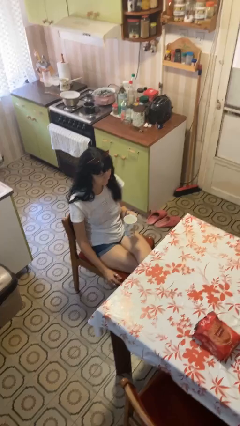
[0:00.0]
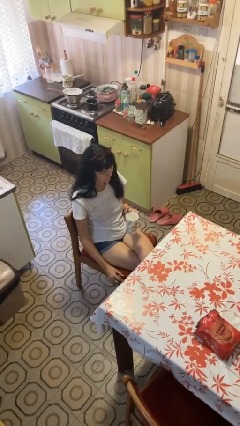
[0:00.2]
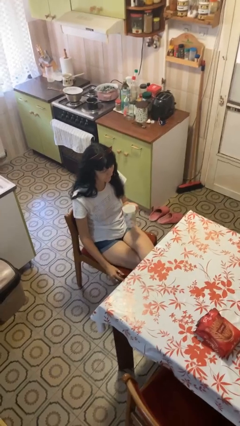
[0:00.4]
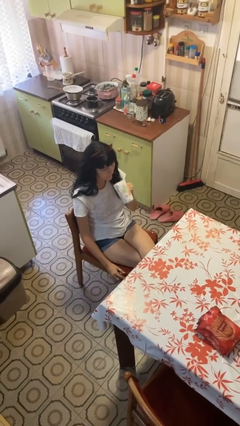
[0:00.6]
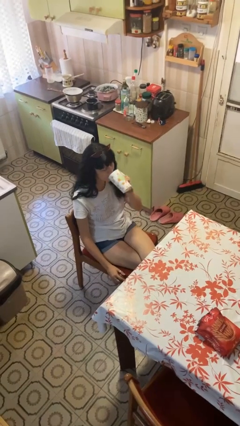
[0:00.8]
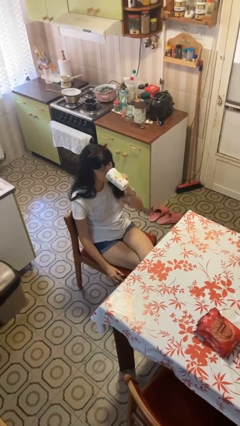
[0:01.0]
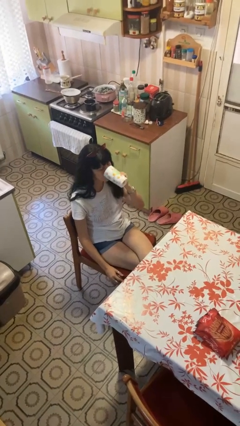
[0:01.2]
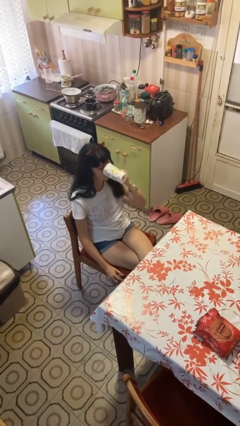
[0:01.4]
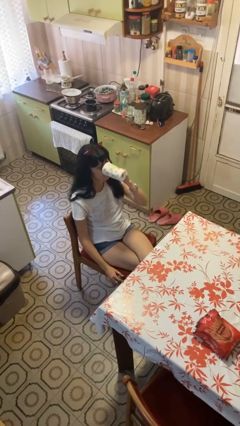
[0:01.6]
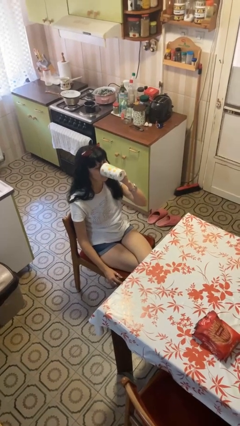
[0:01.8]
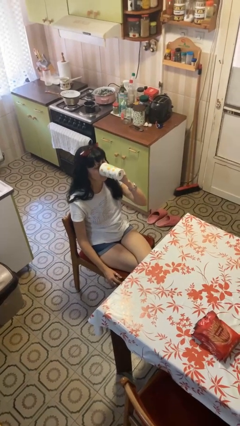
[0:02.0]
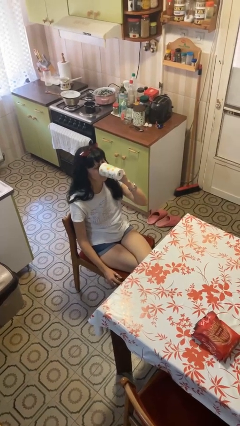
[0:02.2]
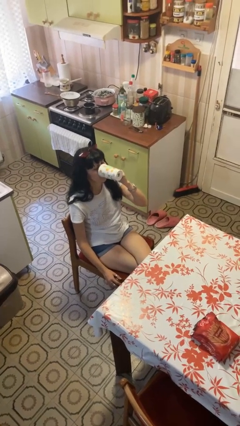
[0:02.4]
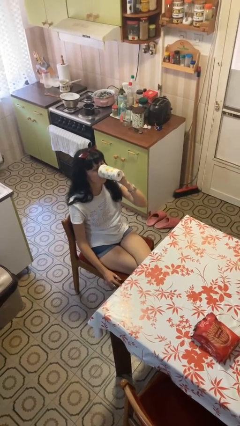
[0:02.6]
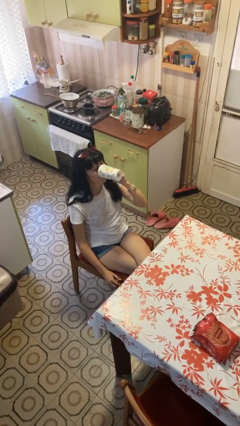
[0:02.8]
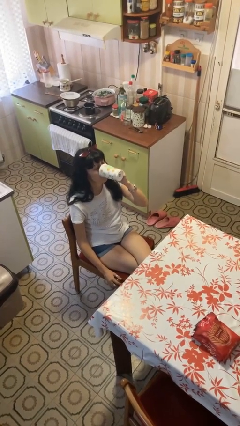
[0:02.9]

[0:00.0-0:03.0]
person drinks from mug

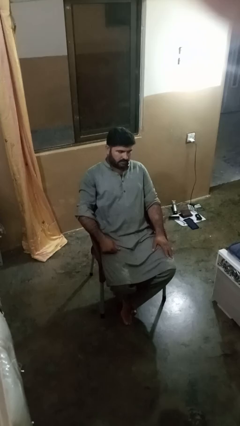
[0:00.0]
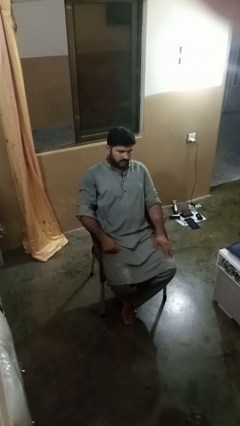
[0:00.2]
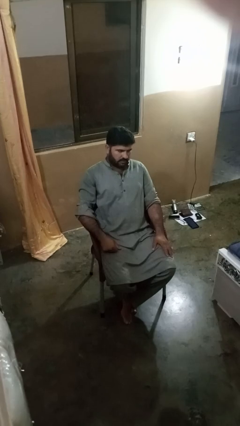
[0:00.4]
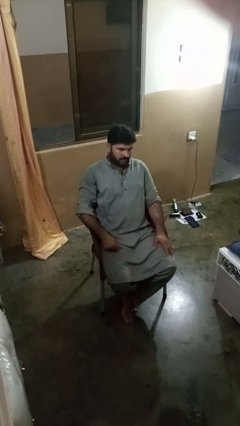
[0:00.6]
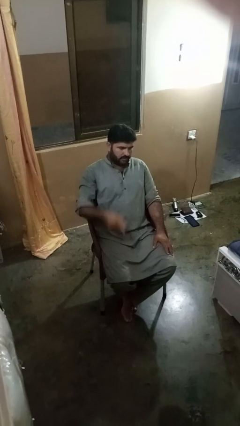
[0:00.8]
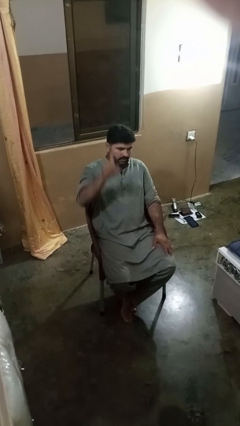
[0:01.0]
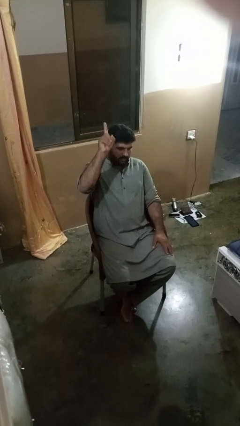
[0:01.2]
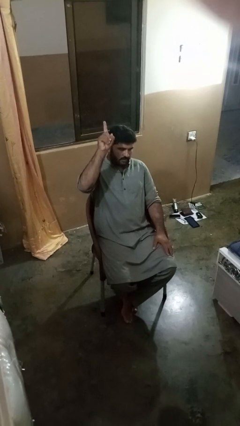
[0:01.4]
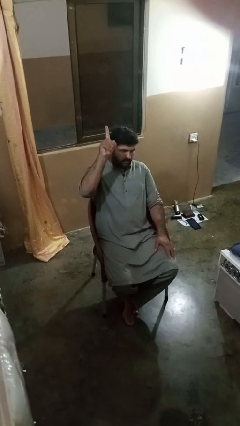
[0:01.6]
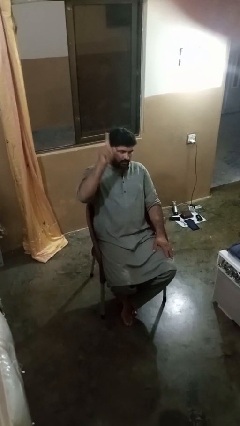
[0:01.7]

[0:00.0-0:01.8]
person gestures number one

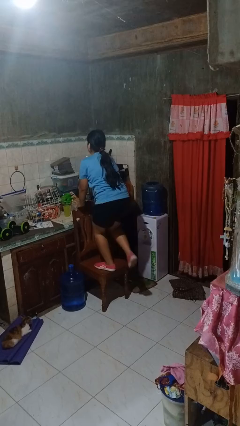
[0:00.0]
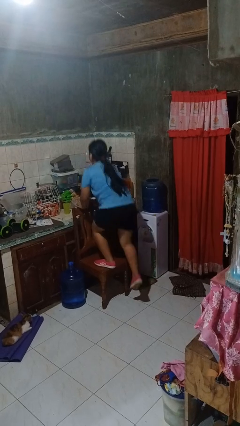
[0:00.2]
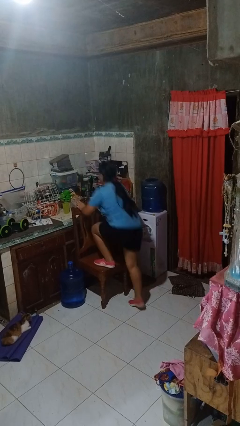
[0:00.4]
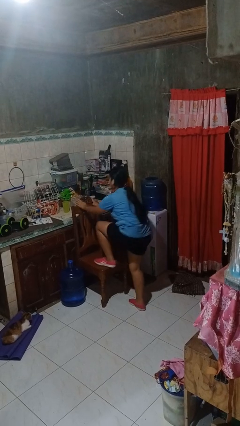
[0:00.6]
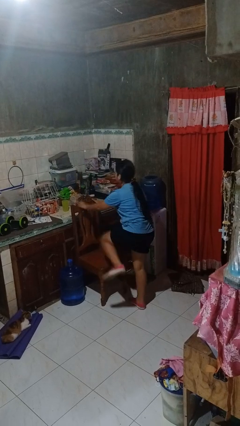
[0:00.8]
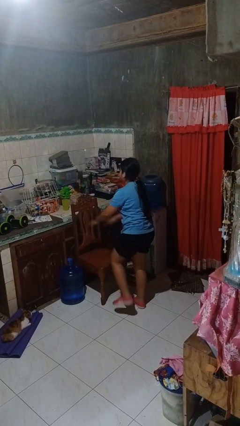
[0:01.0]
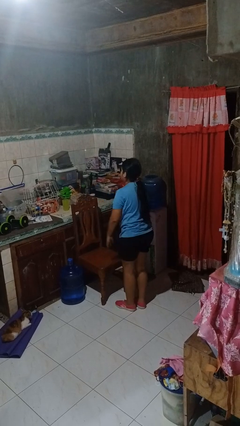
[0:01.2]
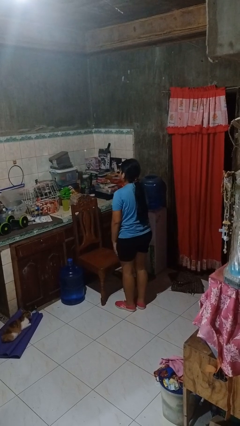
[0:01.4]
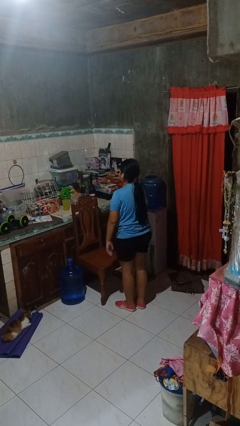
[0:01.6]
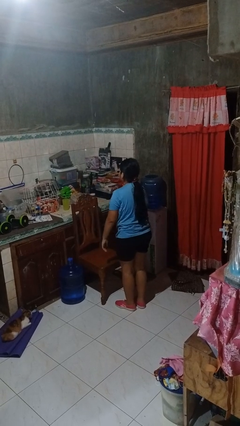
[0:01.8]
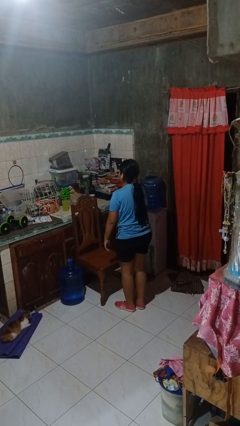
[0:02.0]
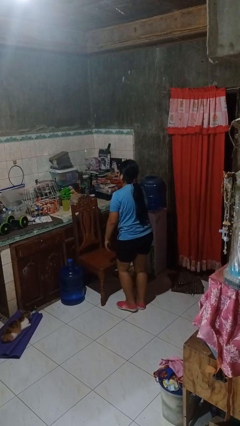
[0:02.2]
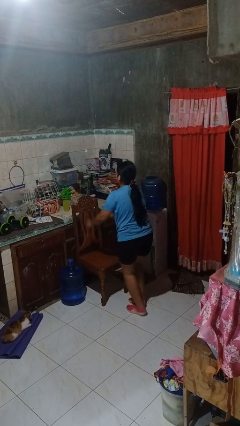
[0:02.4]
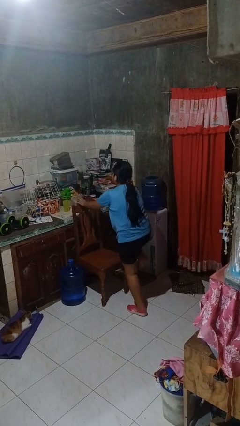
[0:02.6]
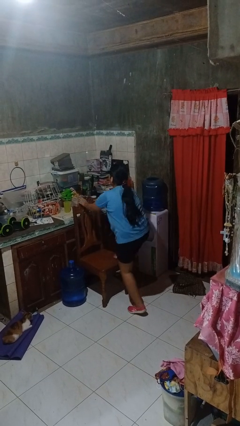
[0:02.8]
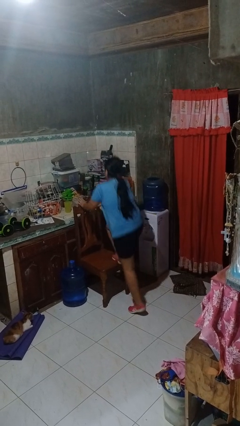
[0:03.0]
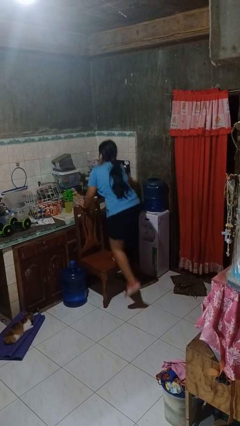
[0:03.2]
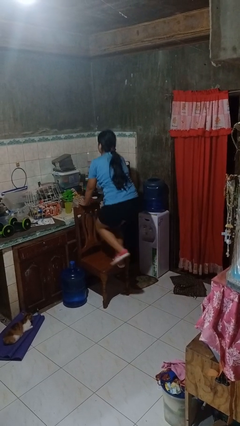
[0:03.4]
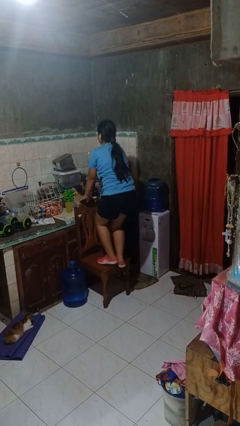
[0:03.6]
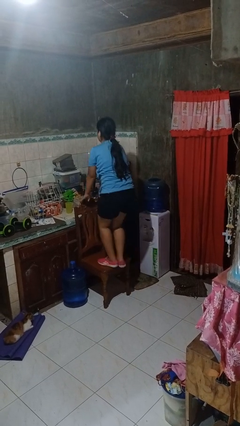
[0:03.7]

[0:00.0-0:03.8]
person climbs off chair

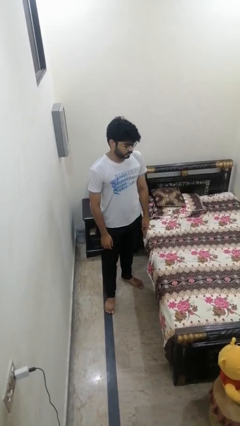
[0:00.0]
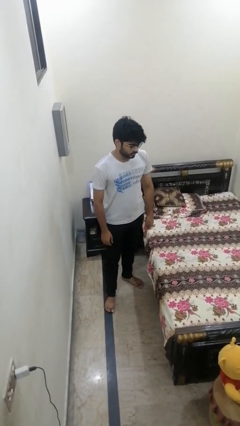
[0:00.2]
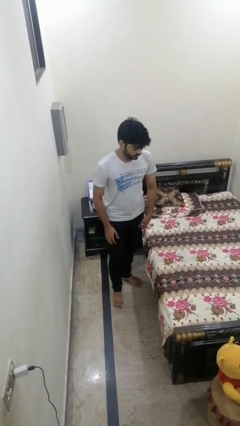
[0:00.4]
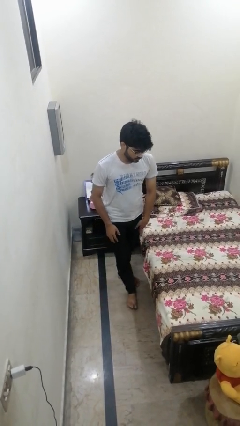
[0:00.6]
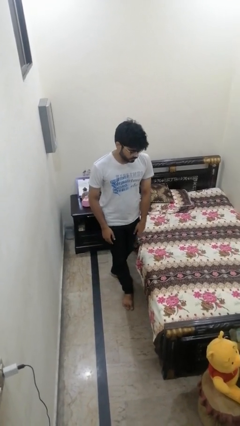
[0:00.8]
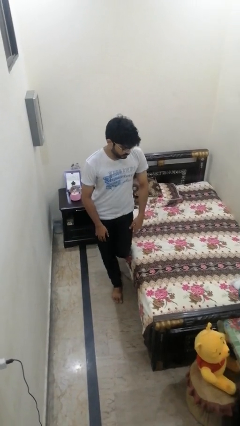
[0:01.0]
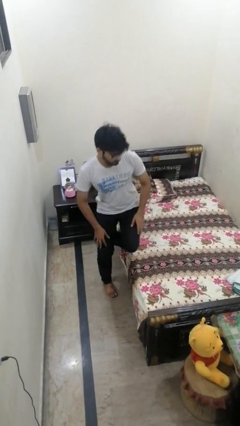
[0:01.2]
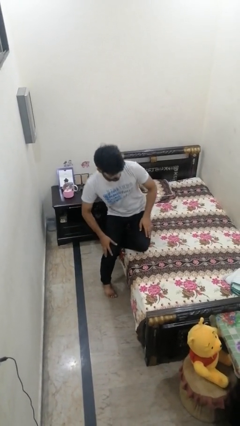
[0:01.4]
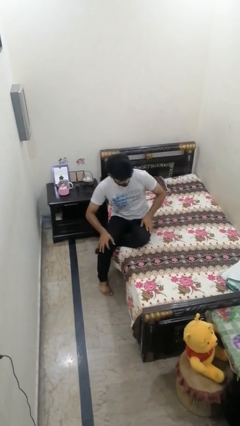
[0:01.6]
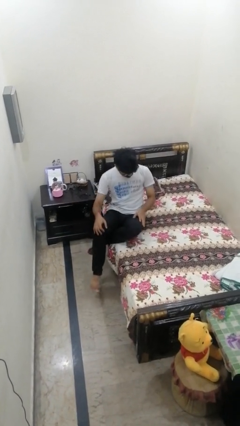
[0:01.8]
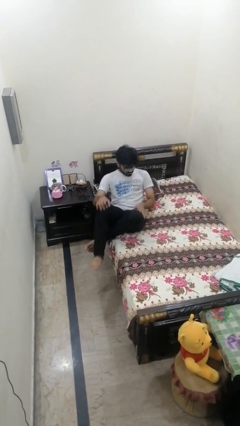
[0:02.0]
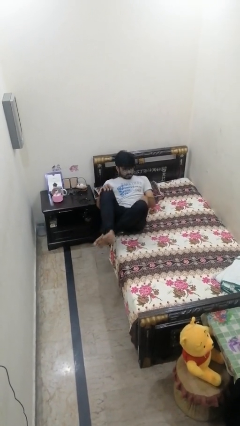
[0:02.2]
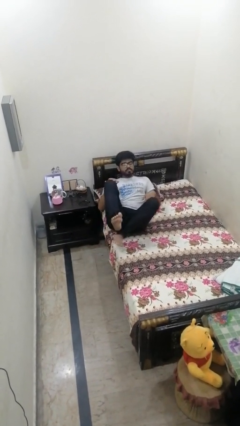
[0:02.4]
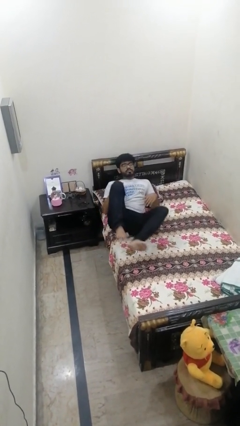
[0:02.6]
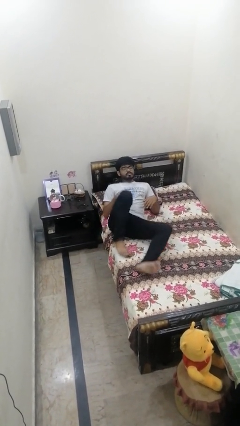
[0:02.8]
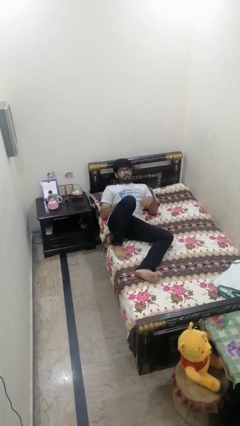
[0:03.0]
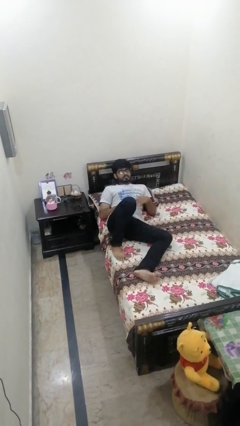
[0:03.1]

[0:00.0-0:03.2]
person lies down on bed

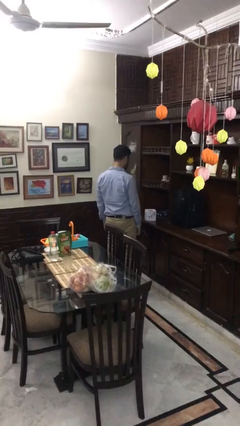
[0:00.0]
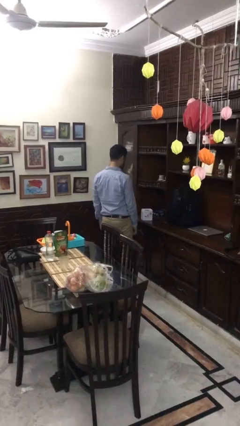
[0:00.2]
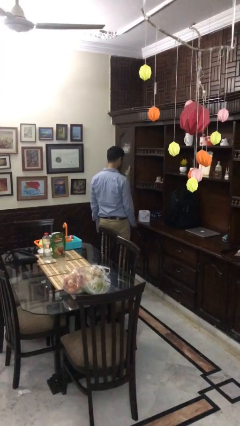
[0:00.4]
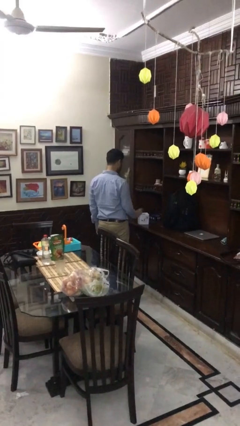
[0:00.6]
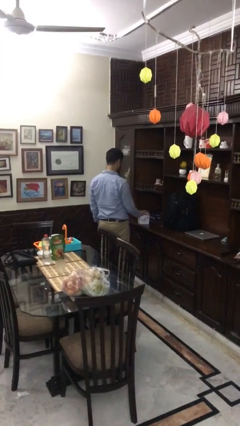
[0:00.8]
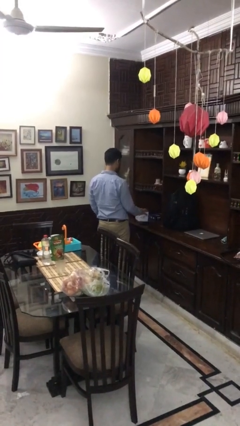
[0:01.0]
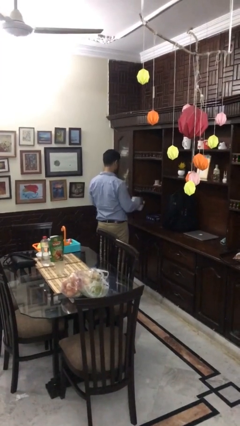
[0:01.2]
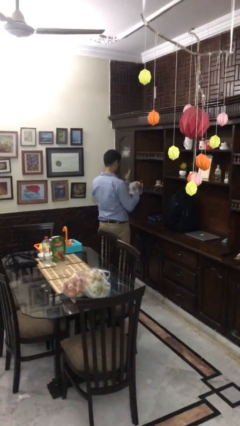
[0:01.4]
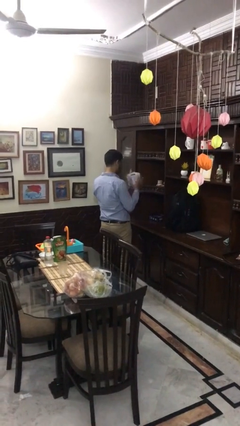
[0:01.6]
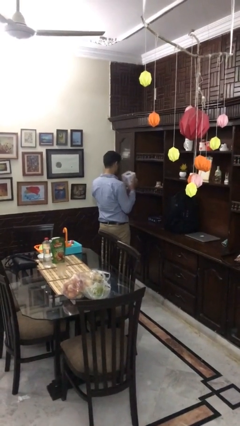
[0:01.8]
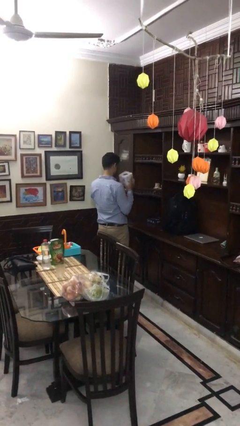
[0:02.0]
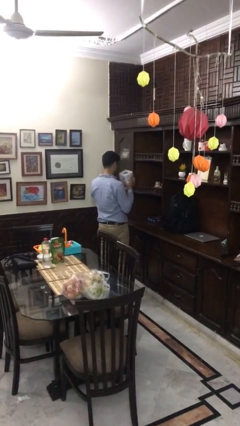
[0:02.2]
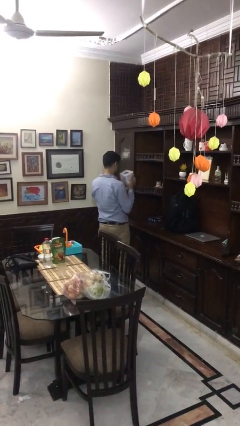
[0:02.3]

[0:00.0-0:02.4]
person picks up object from countertop

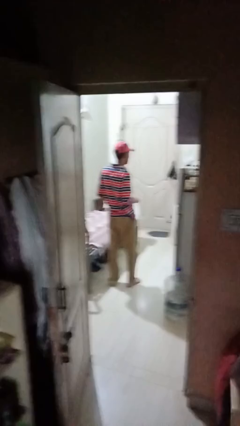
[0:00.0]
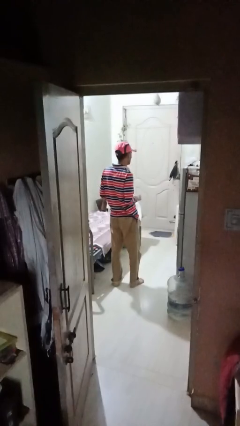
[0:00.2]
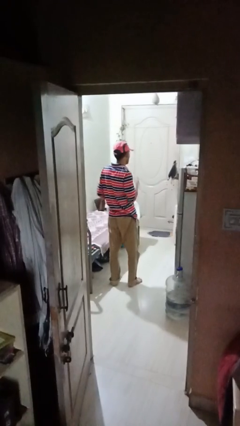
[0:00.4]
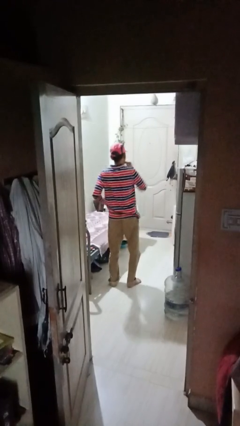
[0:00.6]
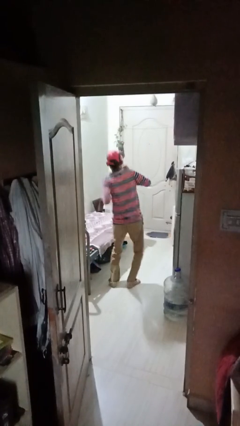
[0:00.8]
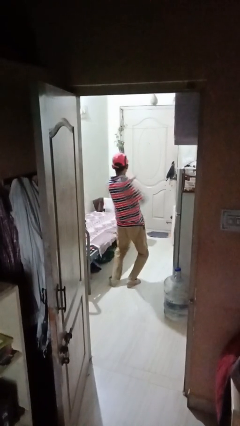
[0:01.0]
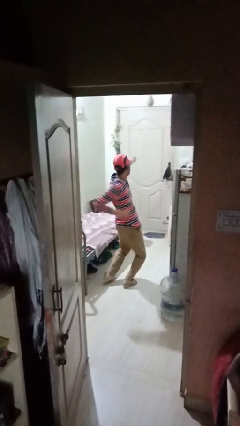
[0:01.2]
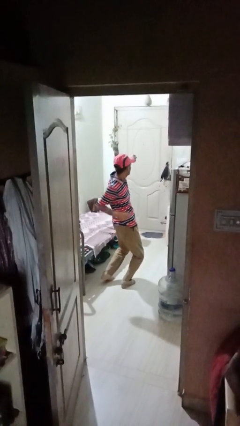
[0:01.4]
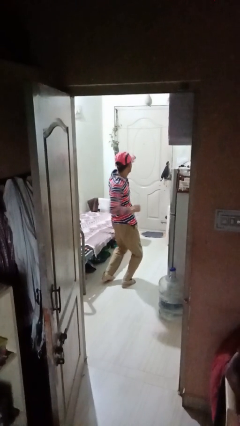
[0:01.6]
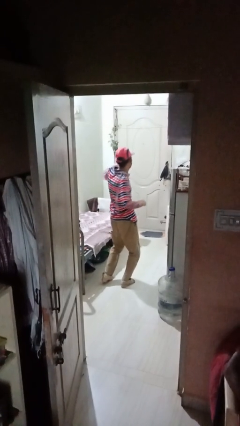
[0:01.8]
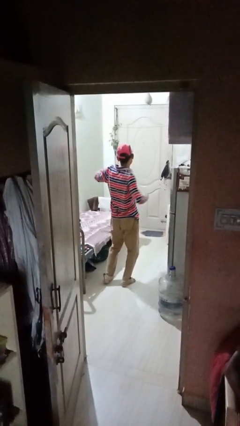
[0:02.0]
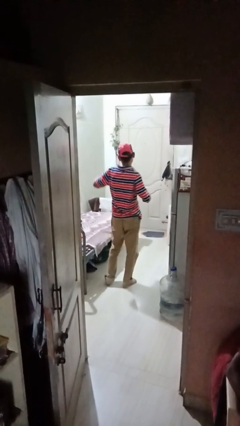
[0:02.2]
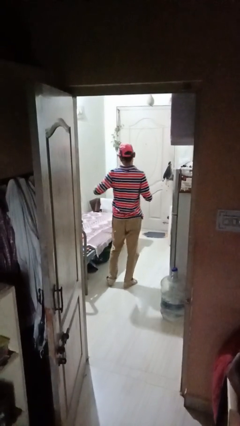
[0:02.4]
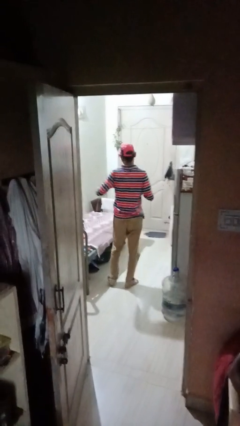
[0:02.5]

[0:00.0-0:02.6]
person punches

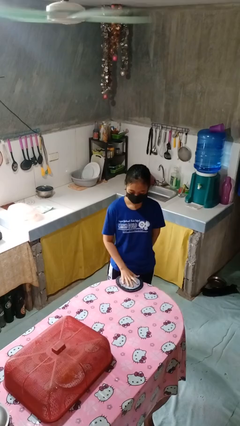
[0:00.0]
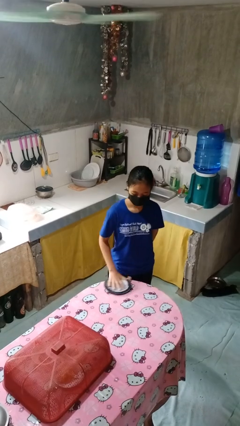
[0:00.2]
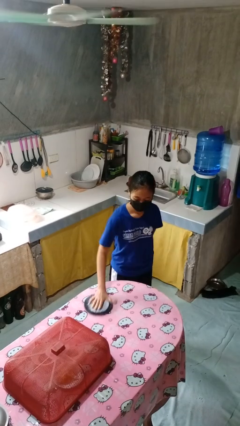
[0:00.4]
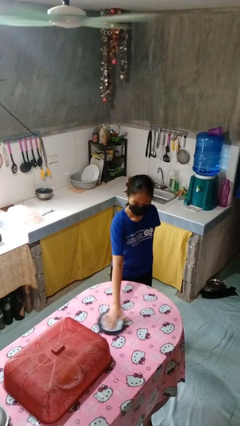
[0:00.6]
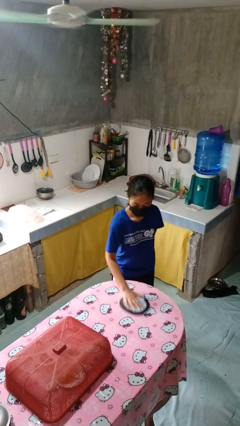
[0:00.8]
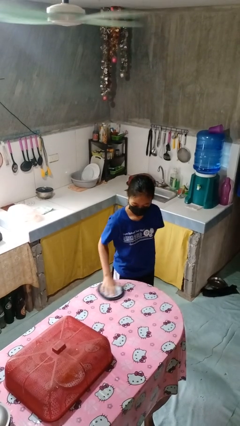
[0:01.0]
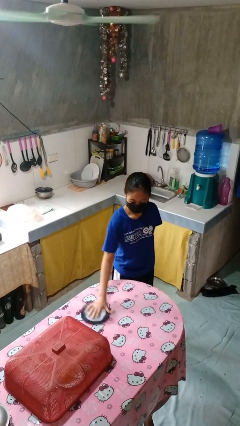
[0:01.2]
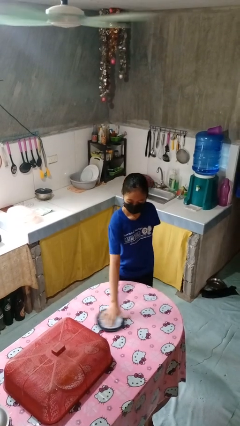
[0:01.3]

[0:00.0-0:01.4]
person cleans table with rag
